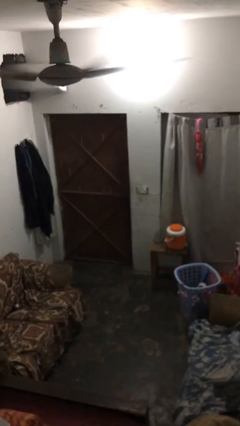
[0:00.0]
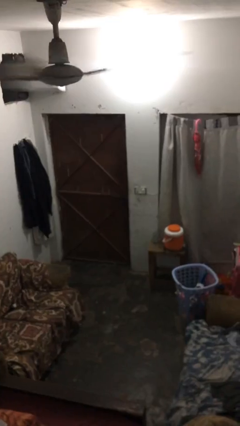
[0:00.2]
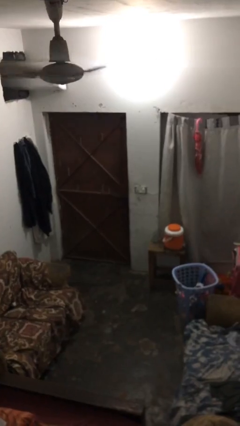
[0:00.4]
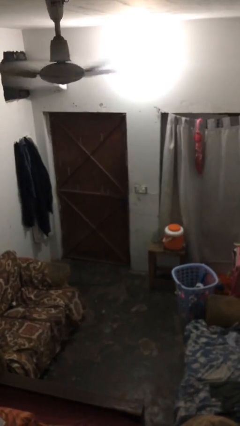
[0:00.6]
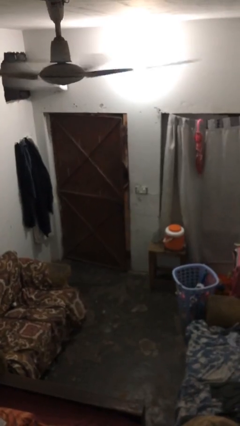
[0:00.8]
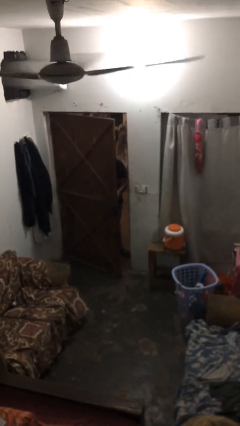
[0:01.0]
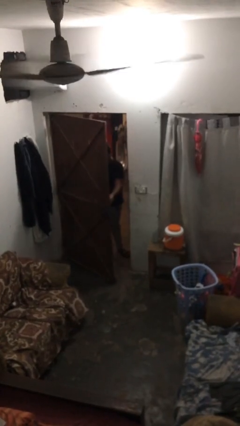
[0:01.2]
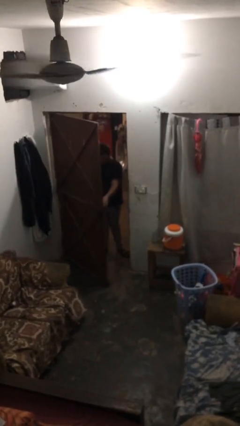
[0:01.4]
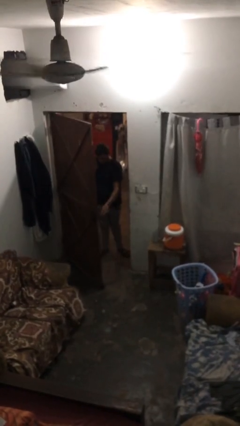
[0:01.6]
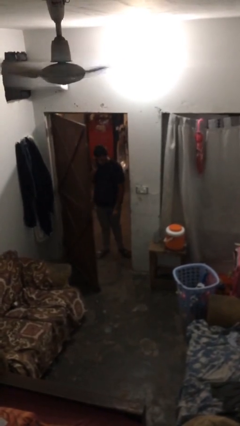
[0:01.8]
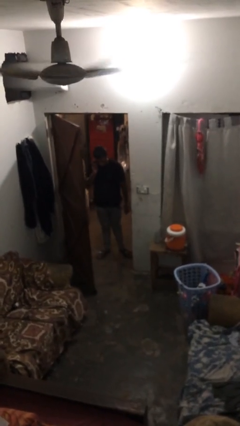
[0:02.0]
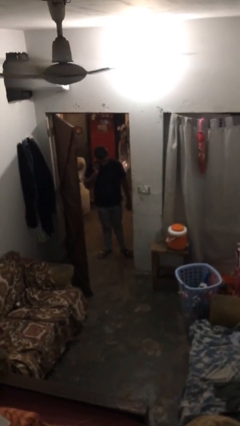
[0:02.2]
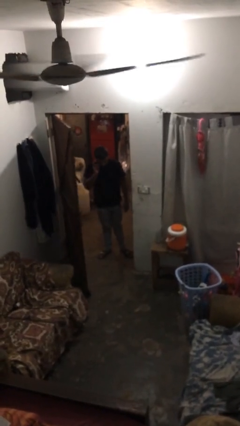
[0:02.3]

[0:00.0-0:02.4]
person opens facility door

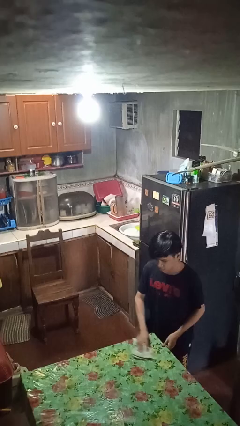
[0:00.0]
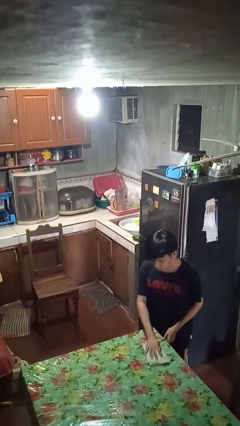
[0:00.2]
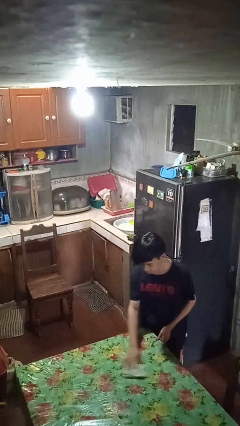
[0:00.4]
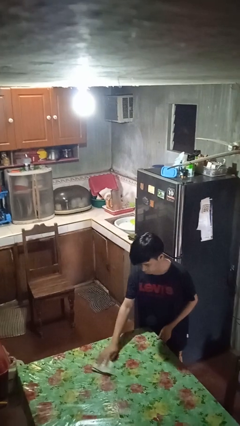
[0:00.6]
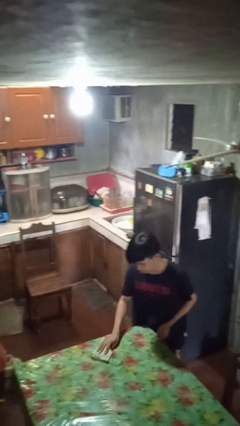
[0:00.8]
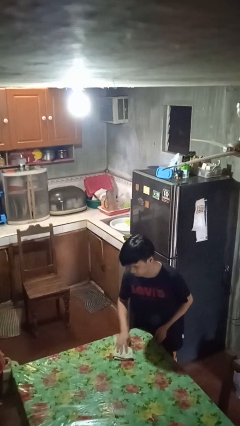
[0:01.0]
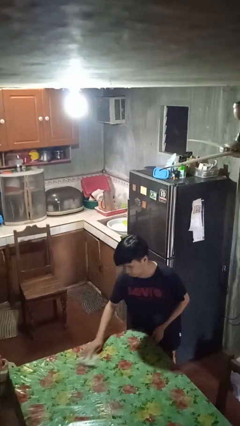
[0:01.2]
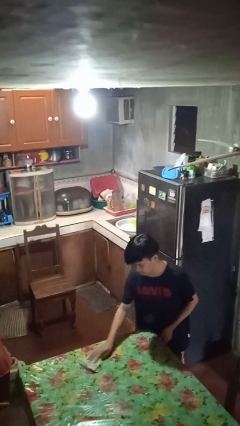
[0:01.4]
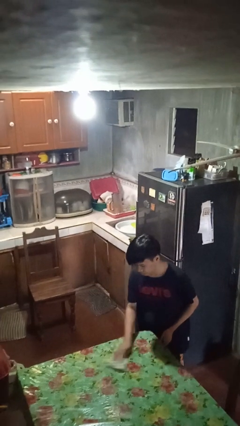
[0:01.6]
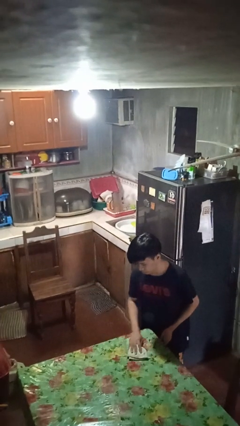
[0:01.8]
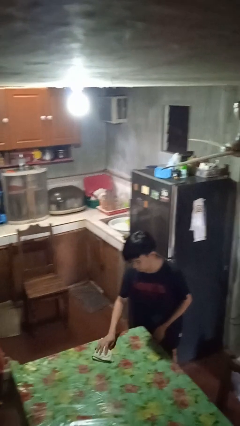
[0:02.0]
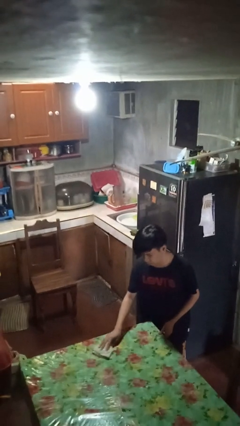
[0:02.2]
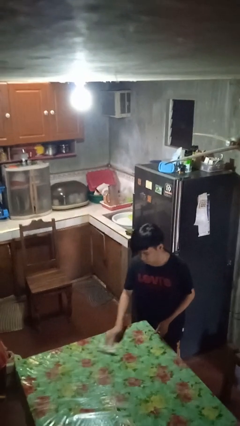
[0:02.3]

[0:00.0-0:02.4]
person cleans table with rag

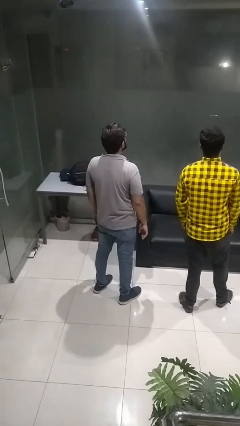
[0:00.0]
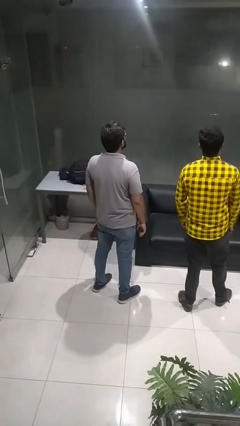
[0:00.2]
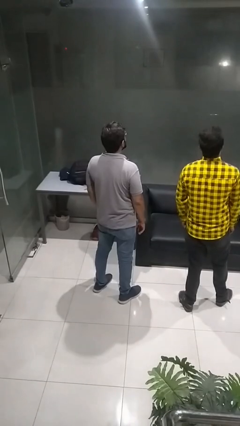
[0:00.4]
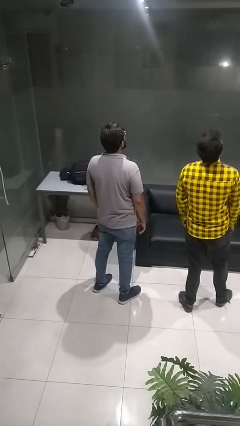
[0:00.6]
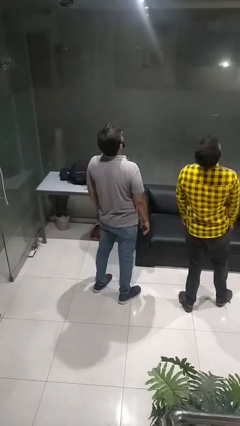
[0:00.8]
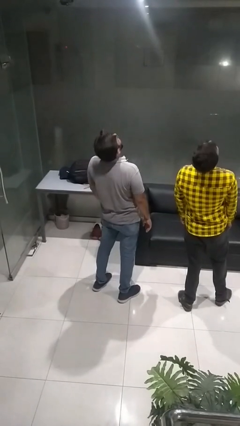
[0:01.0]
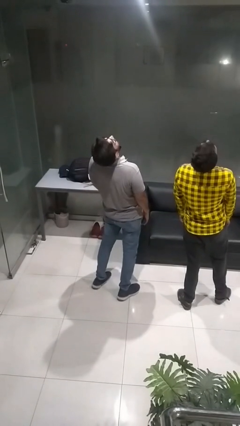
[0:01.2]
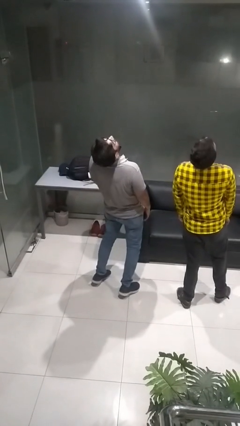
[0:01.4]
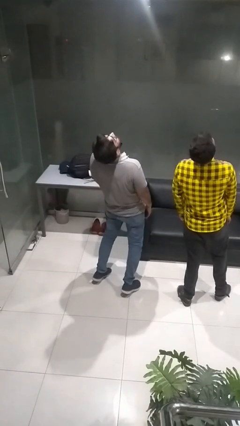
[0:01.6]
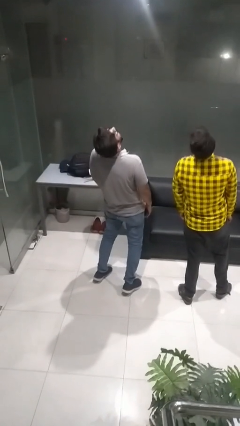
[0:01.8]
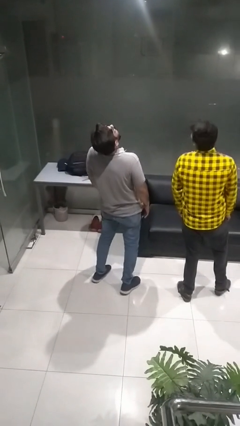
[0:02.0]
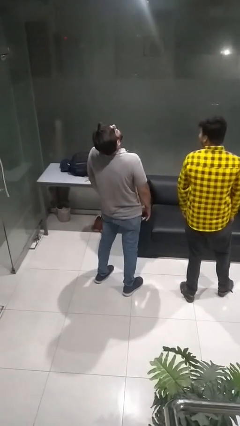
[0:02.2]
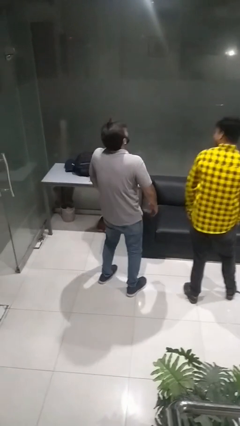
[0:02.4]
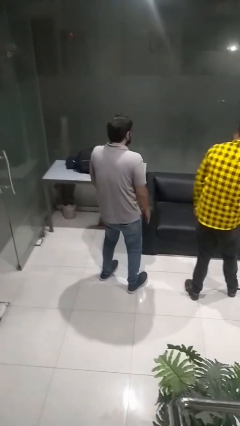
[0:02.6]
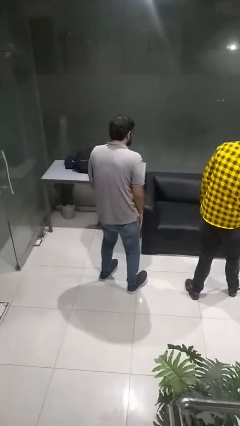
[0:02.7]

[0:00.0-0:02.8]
person laughs with person

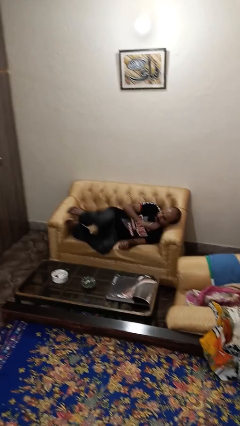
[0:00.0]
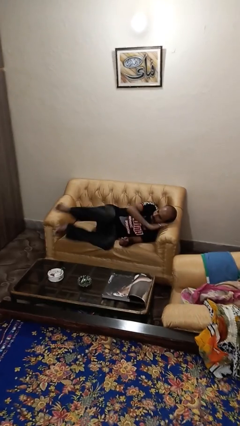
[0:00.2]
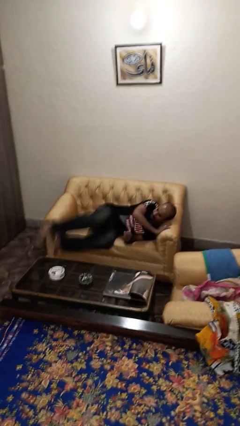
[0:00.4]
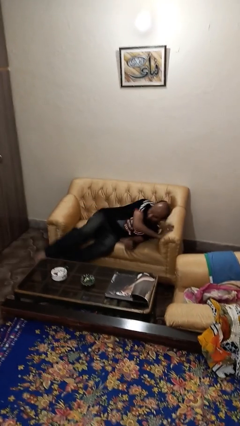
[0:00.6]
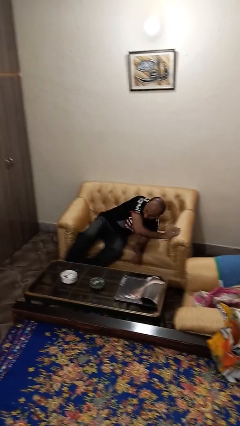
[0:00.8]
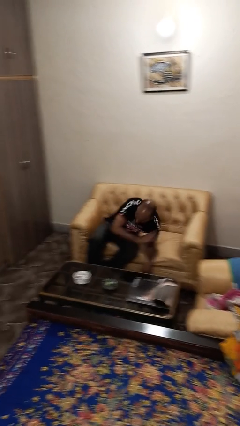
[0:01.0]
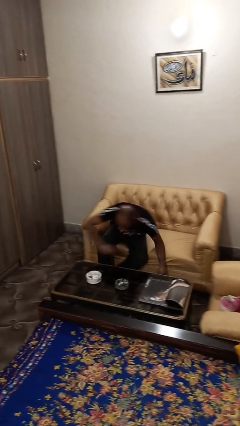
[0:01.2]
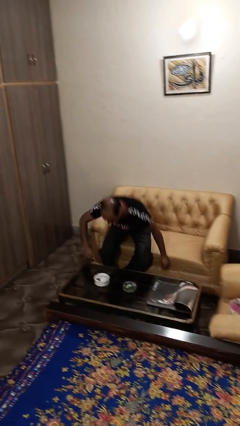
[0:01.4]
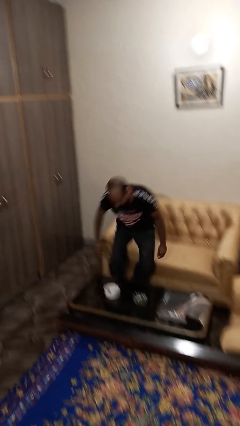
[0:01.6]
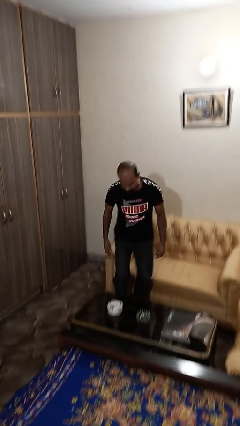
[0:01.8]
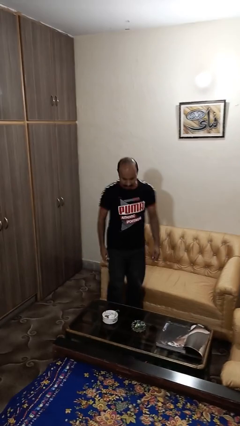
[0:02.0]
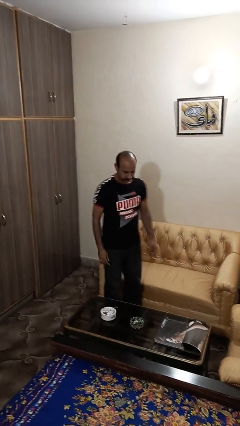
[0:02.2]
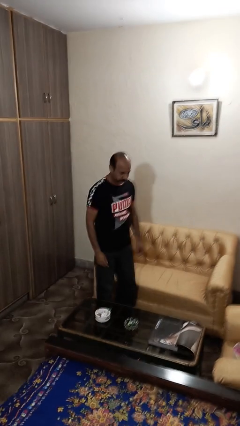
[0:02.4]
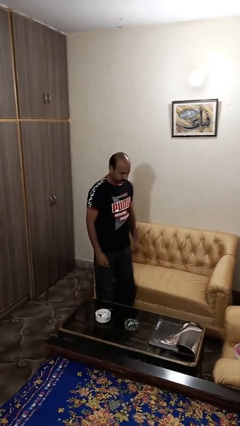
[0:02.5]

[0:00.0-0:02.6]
person stands up

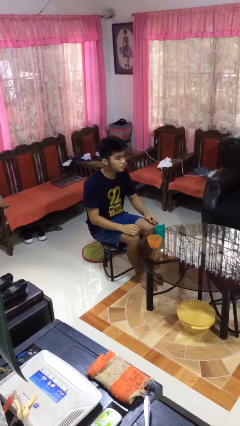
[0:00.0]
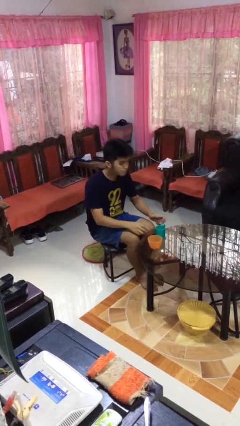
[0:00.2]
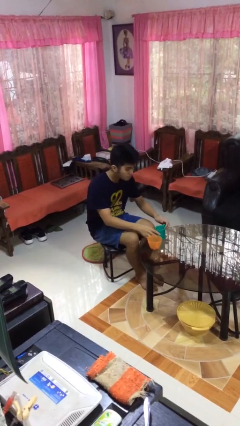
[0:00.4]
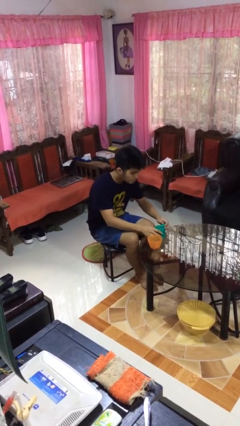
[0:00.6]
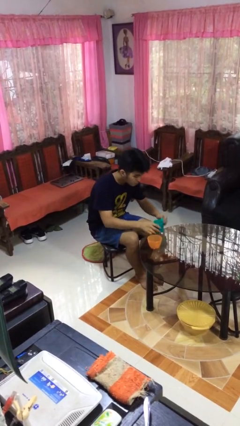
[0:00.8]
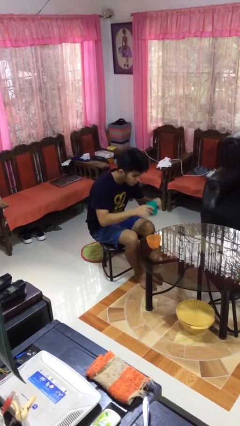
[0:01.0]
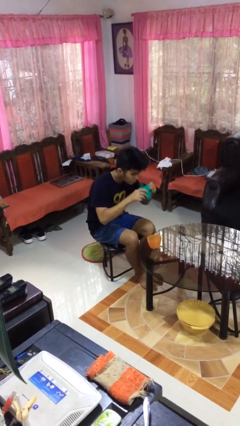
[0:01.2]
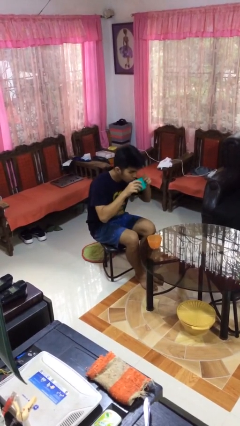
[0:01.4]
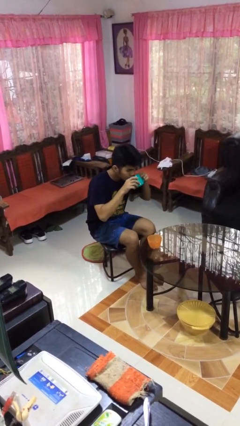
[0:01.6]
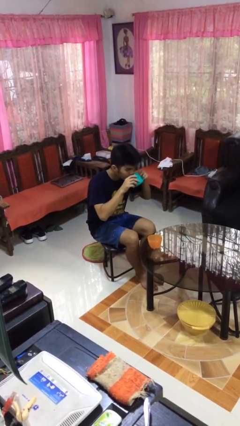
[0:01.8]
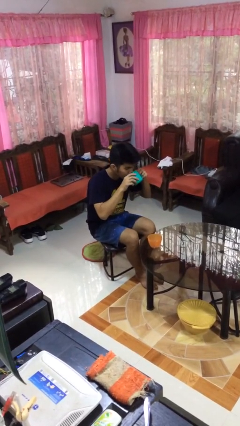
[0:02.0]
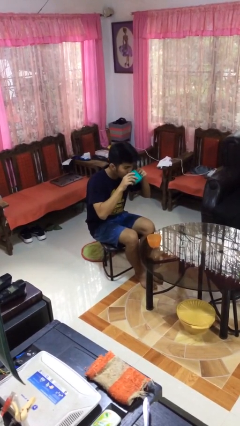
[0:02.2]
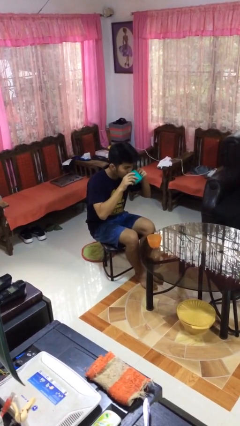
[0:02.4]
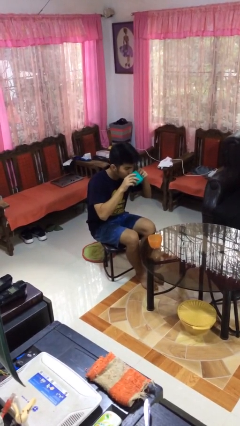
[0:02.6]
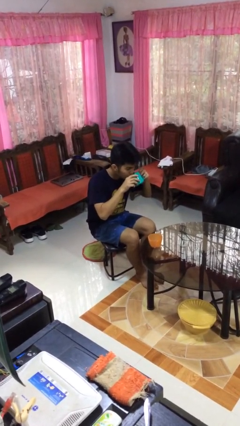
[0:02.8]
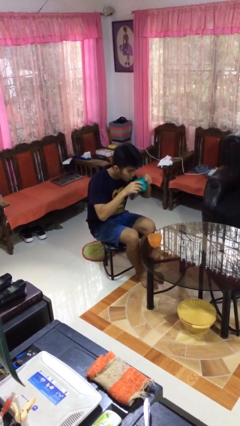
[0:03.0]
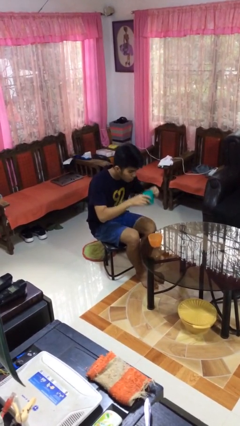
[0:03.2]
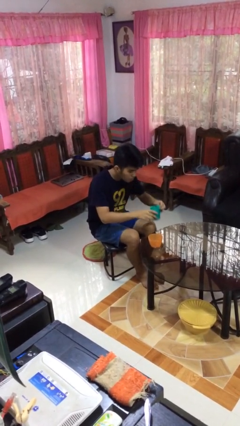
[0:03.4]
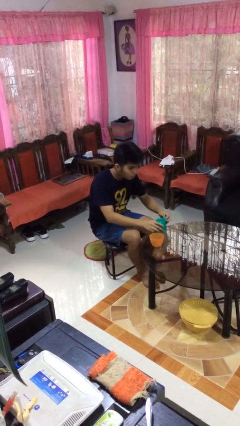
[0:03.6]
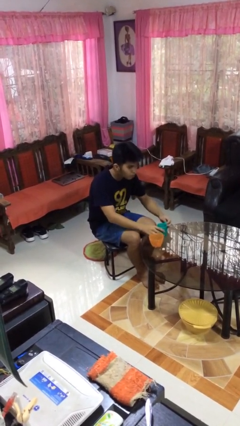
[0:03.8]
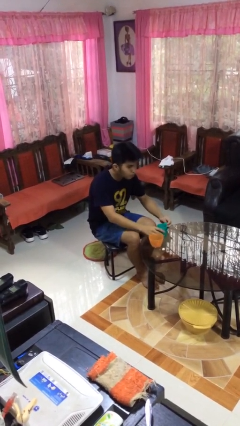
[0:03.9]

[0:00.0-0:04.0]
person drinks from cup

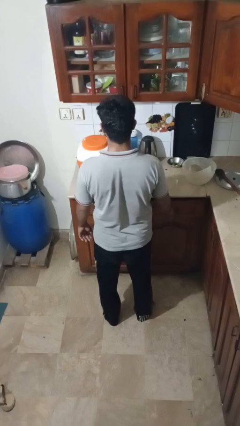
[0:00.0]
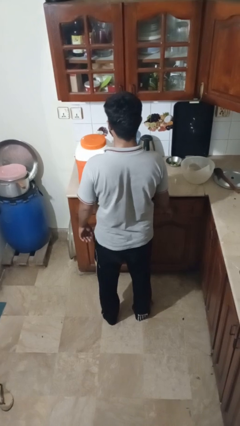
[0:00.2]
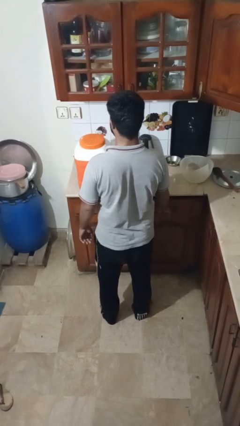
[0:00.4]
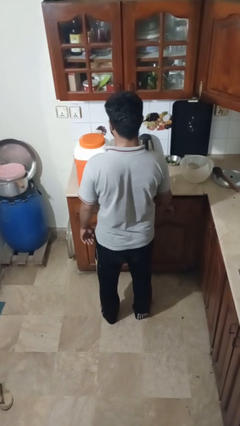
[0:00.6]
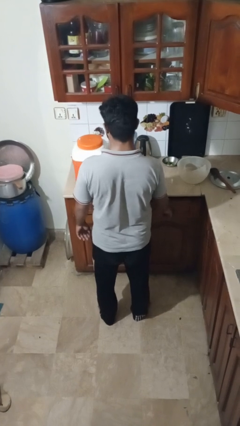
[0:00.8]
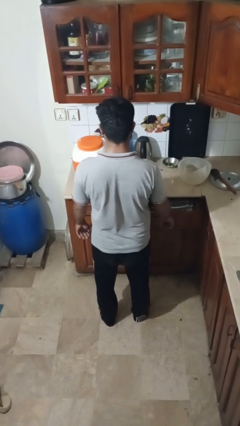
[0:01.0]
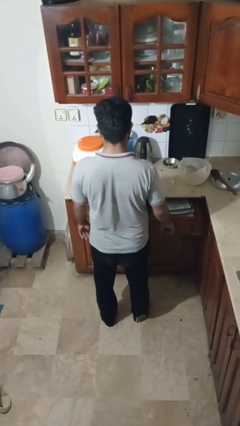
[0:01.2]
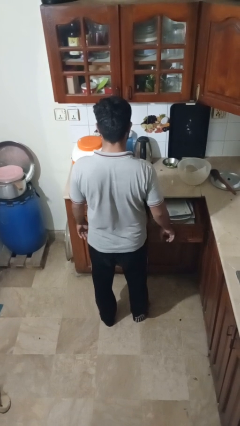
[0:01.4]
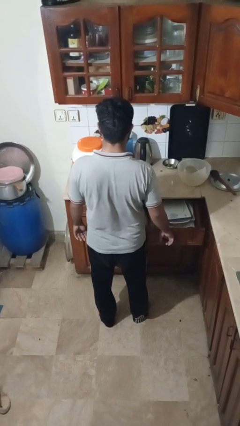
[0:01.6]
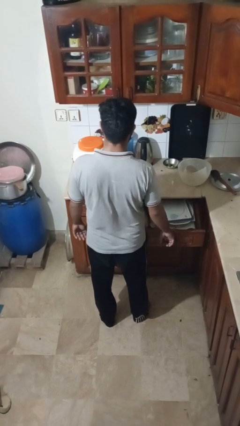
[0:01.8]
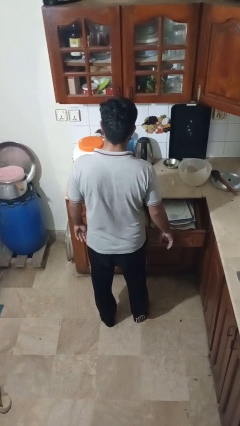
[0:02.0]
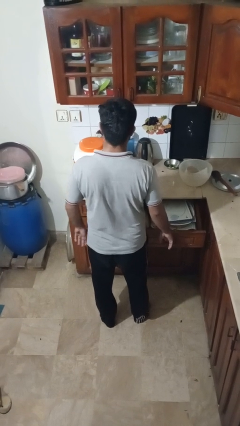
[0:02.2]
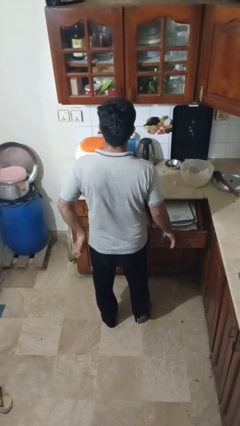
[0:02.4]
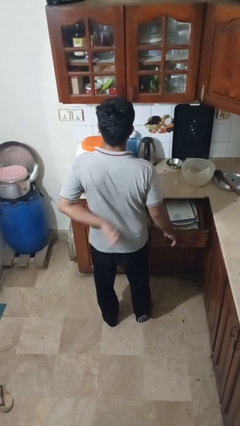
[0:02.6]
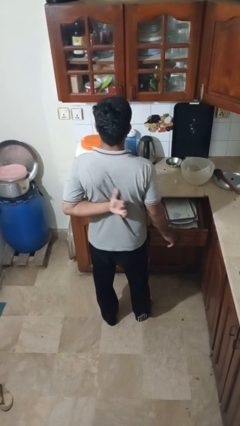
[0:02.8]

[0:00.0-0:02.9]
person opens kitchen drawer

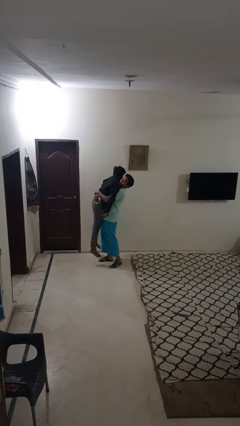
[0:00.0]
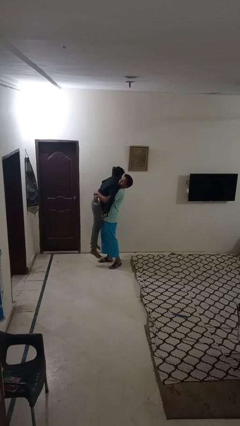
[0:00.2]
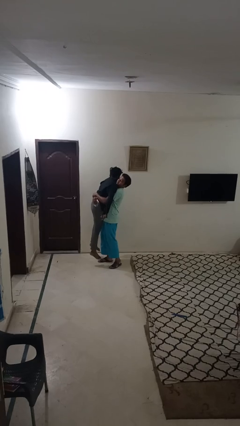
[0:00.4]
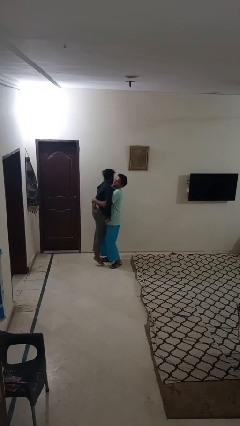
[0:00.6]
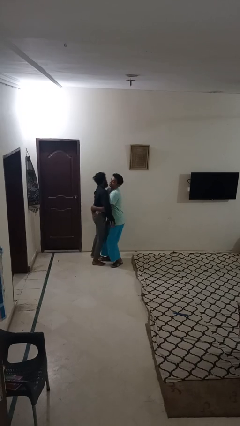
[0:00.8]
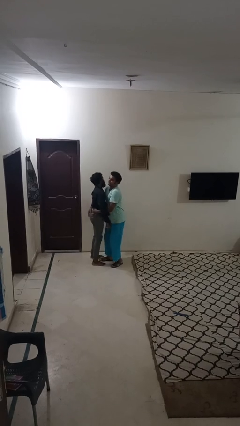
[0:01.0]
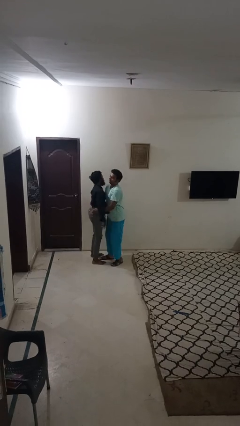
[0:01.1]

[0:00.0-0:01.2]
person puts down person
